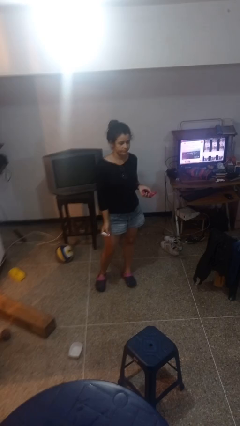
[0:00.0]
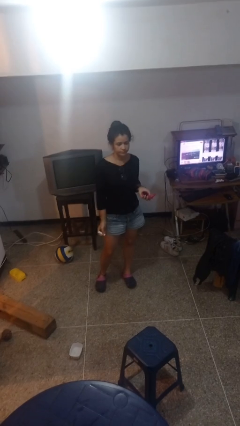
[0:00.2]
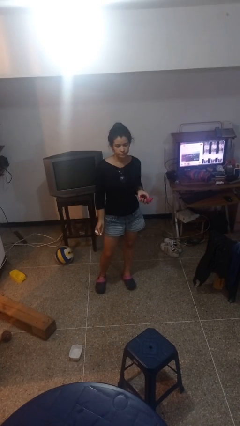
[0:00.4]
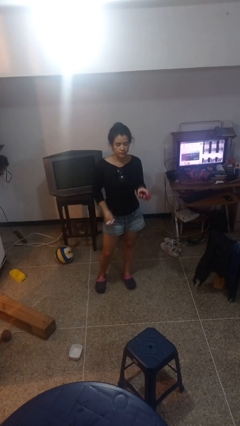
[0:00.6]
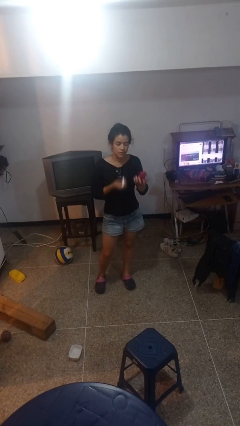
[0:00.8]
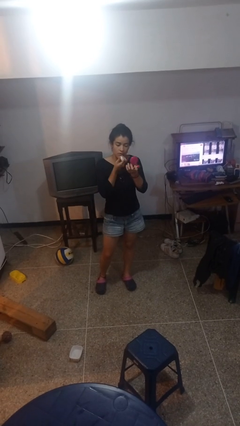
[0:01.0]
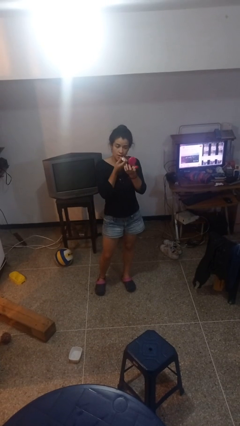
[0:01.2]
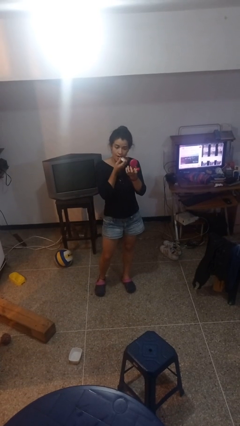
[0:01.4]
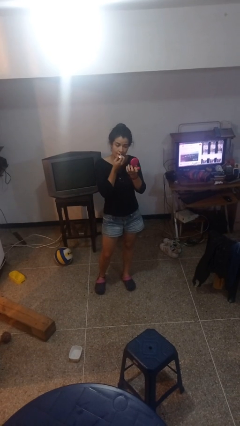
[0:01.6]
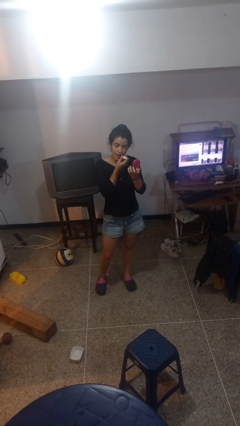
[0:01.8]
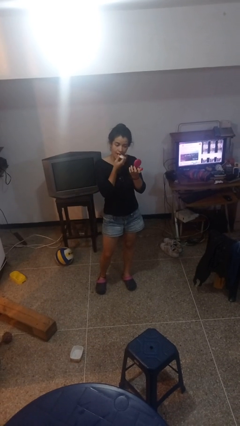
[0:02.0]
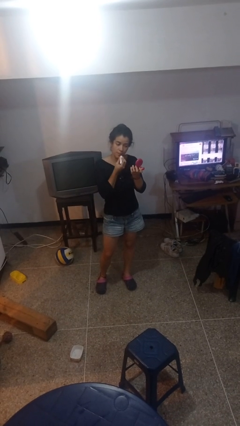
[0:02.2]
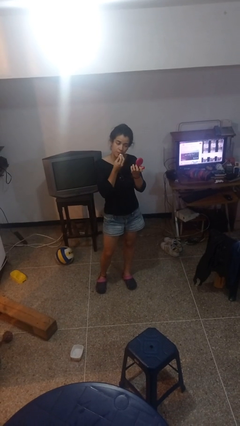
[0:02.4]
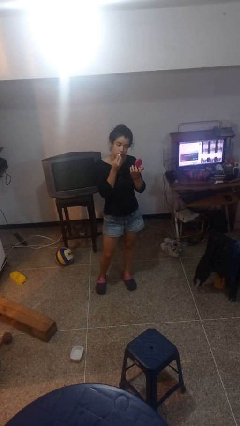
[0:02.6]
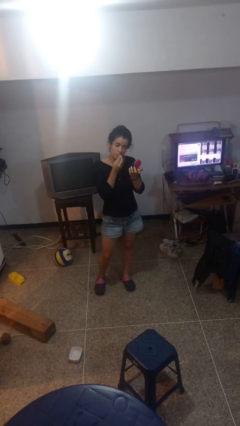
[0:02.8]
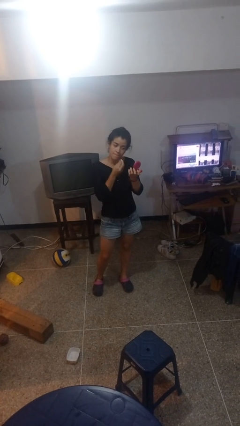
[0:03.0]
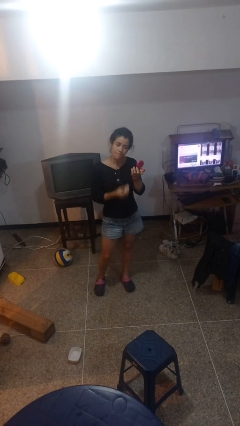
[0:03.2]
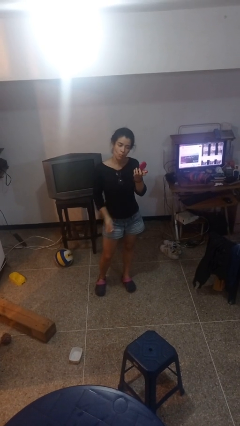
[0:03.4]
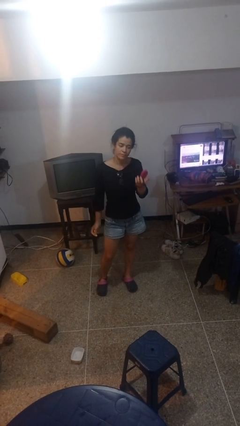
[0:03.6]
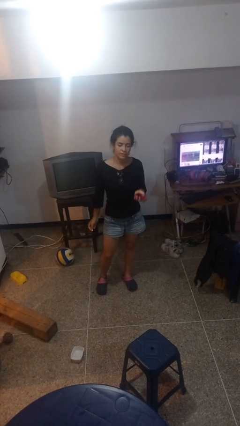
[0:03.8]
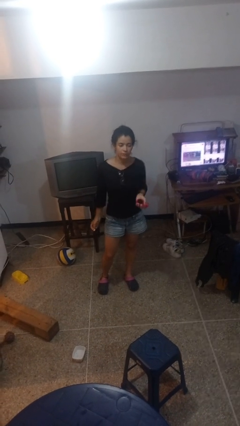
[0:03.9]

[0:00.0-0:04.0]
person applies lip makeup

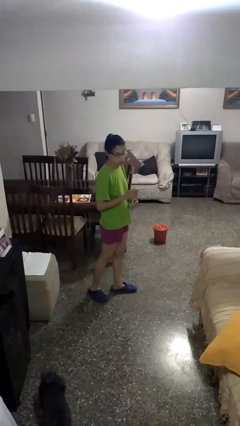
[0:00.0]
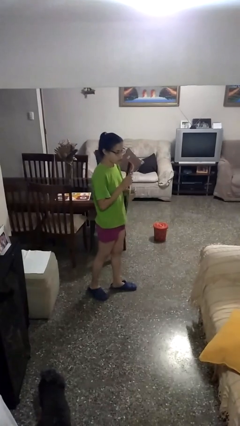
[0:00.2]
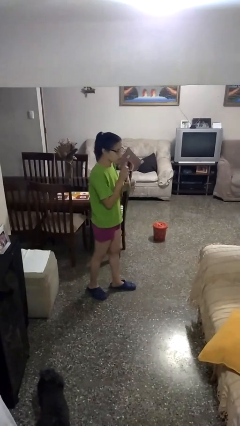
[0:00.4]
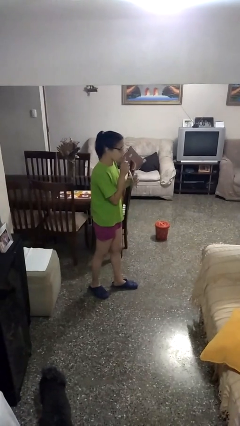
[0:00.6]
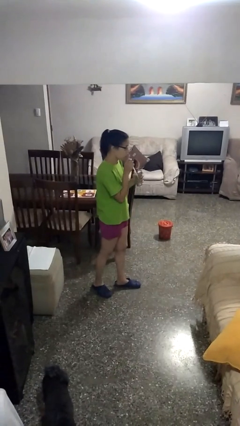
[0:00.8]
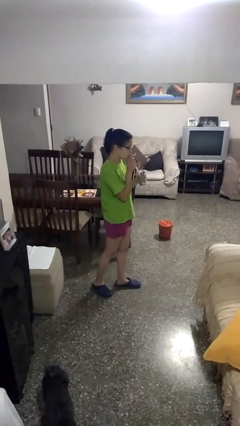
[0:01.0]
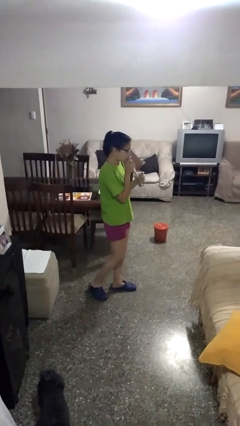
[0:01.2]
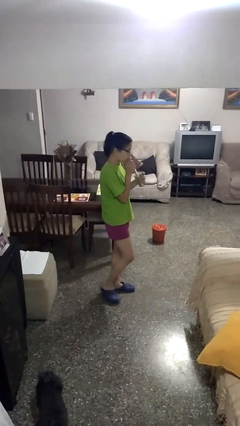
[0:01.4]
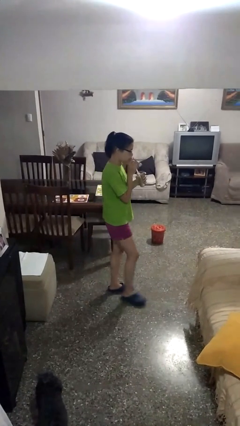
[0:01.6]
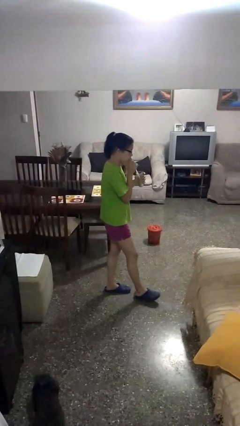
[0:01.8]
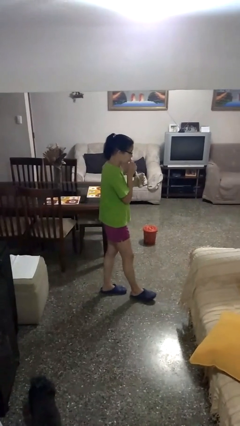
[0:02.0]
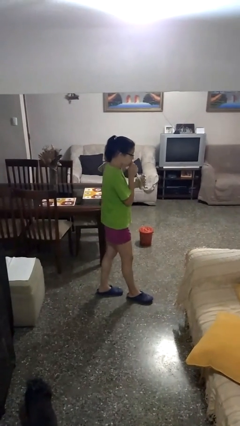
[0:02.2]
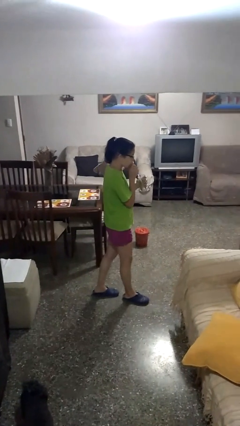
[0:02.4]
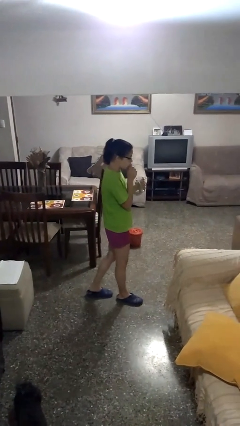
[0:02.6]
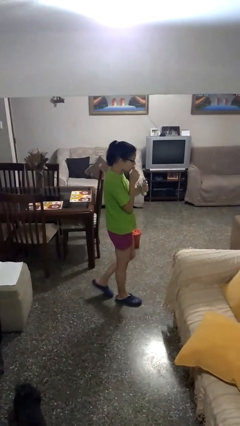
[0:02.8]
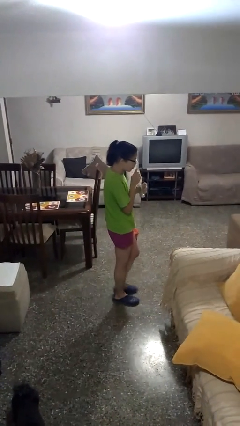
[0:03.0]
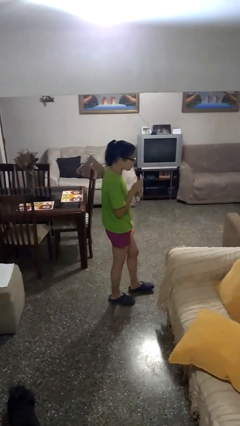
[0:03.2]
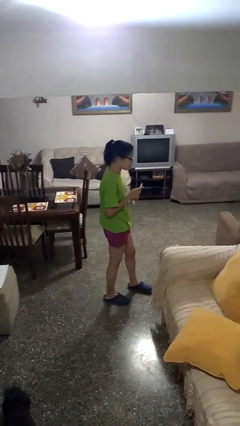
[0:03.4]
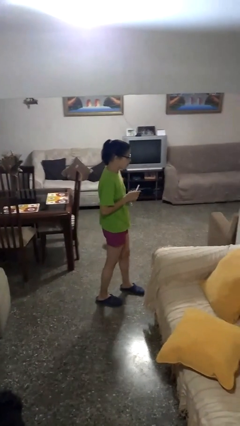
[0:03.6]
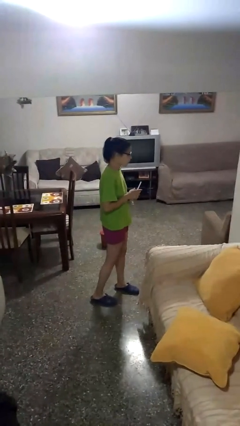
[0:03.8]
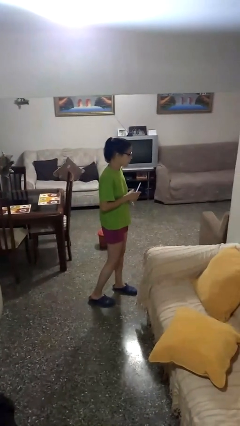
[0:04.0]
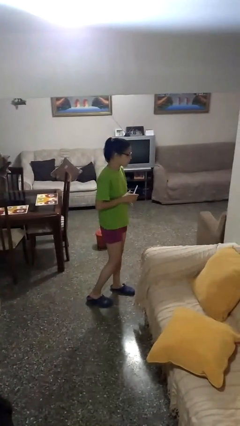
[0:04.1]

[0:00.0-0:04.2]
person drinks from straw

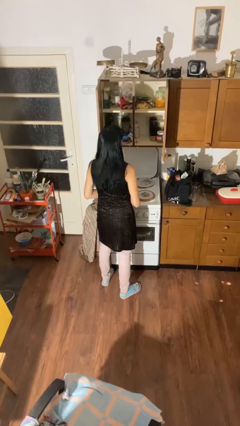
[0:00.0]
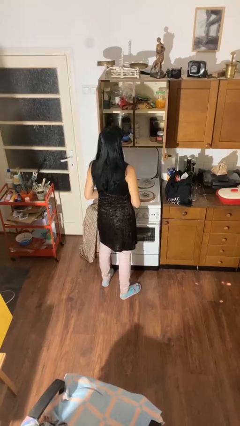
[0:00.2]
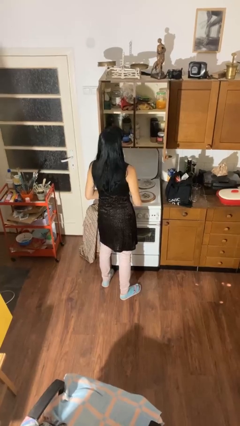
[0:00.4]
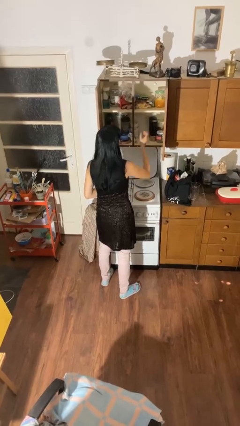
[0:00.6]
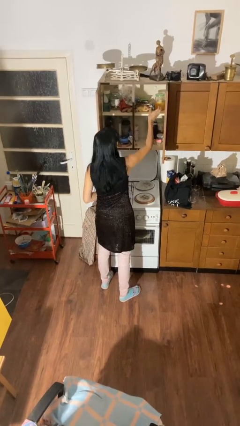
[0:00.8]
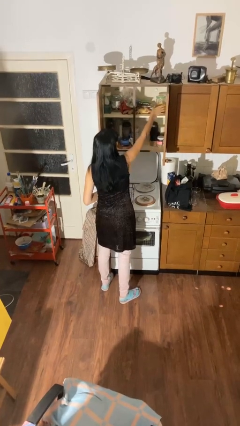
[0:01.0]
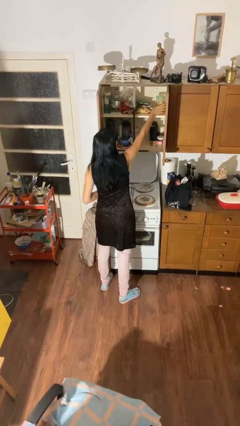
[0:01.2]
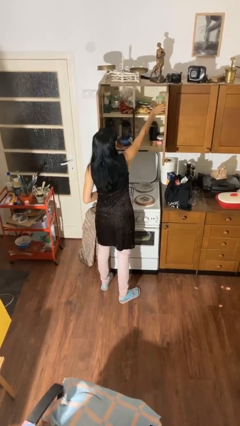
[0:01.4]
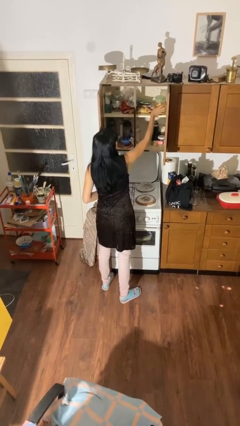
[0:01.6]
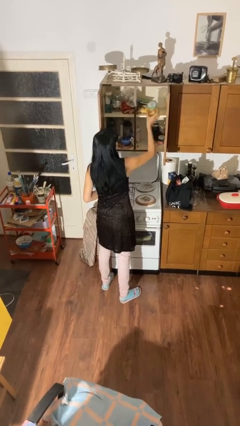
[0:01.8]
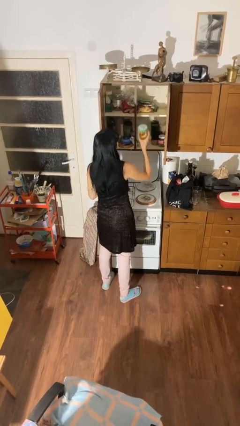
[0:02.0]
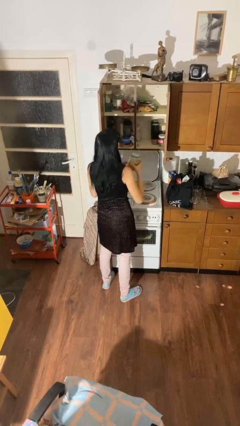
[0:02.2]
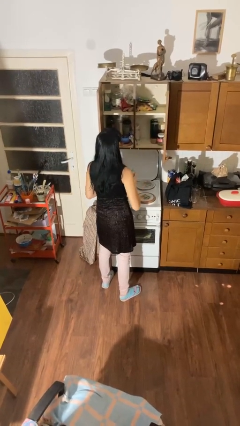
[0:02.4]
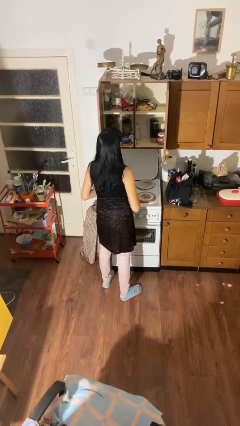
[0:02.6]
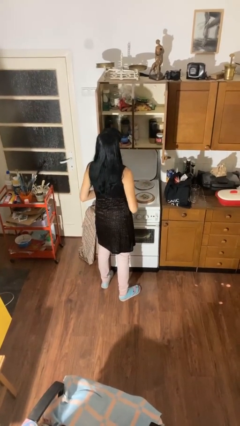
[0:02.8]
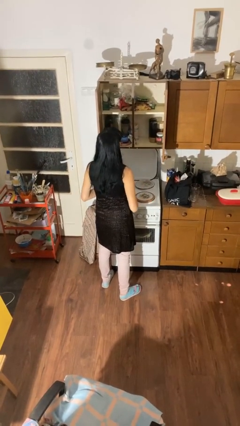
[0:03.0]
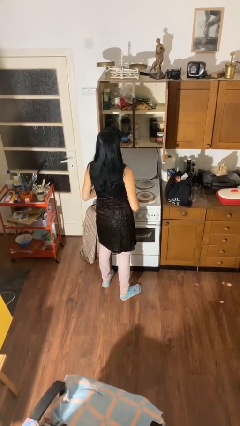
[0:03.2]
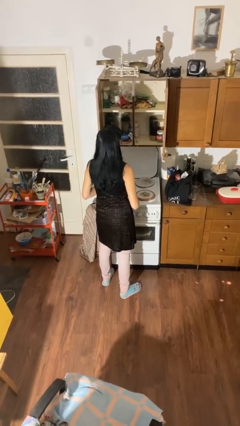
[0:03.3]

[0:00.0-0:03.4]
person picks up object from cabinet

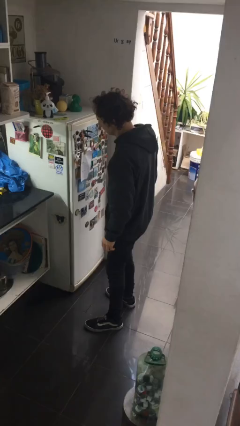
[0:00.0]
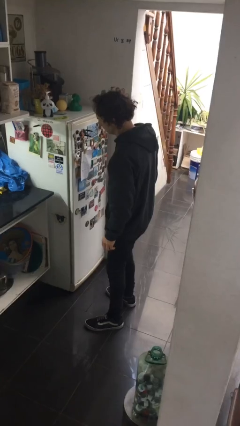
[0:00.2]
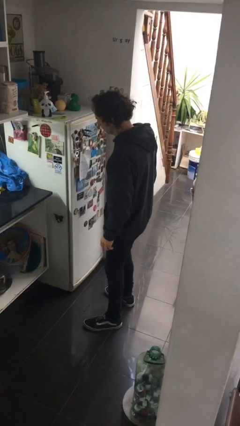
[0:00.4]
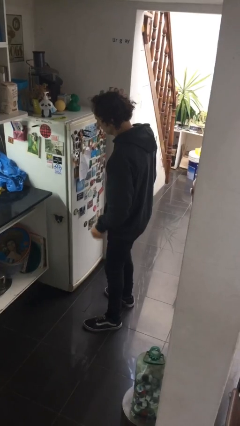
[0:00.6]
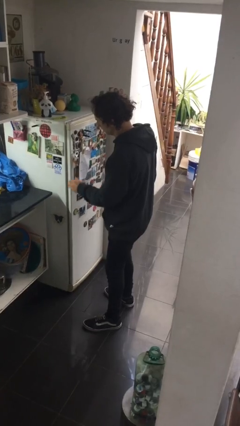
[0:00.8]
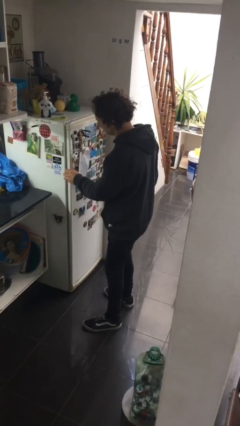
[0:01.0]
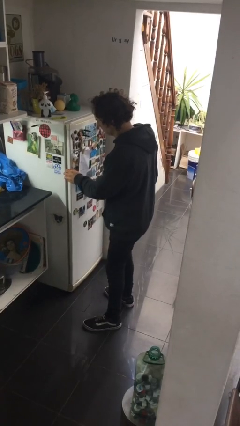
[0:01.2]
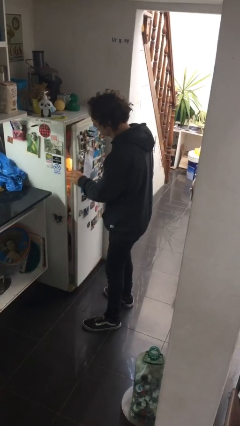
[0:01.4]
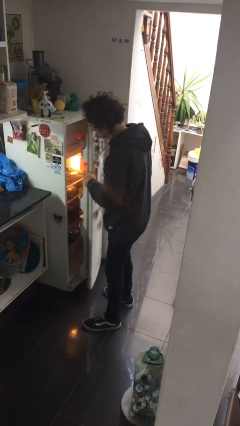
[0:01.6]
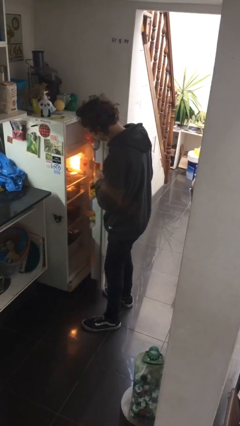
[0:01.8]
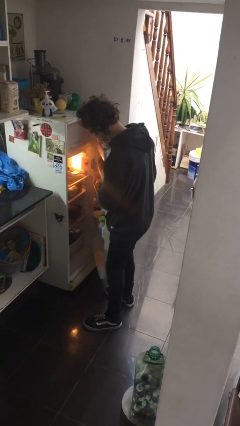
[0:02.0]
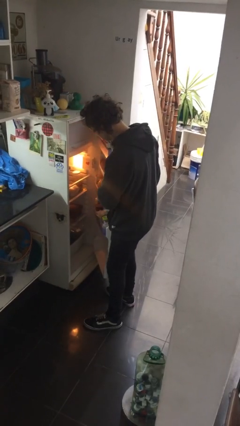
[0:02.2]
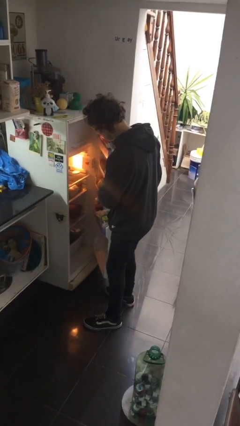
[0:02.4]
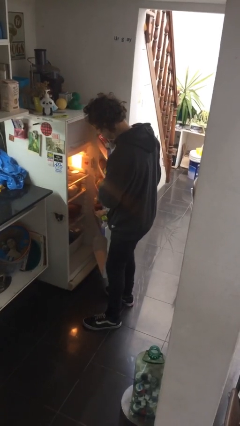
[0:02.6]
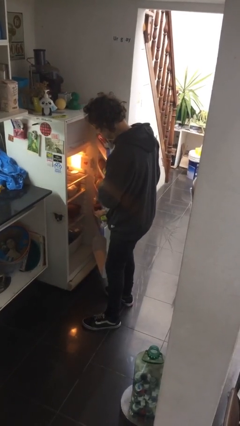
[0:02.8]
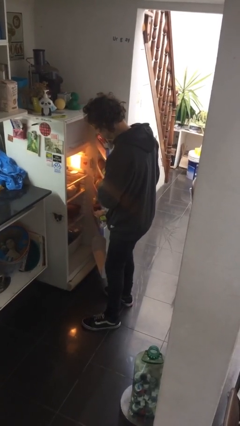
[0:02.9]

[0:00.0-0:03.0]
person opens refrigerator

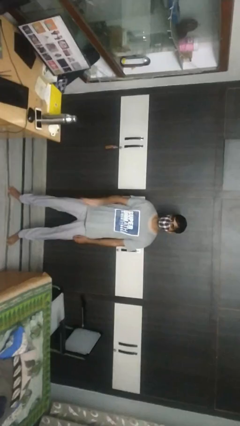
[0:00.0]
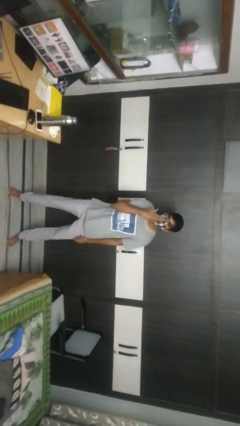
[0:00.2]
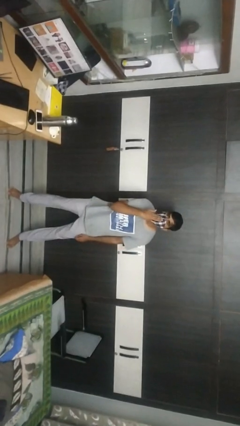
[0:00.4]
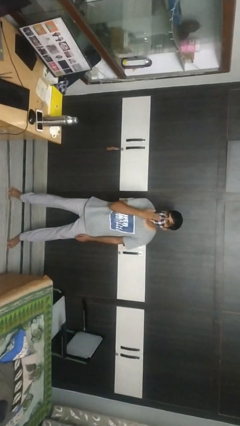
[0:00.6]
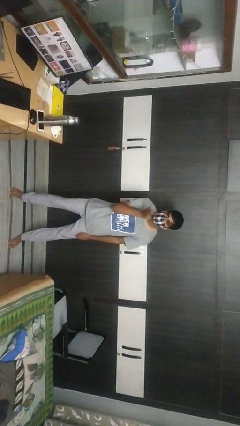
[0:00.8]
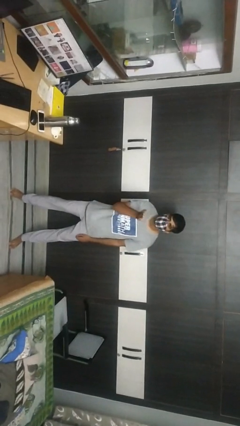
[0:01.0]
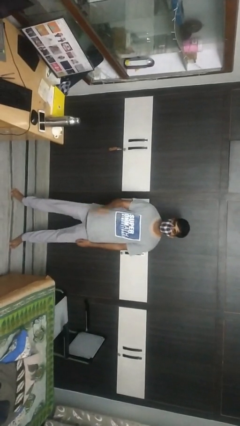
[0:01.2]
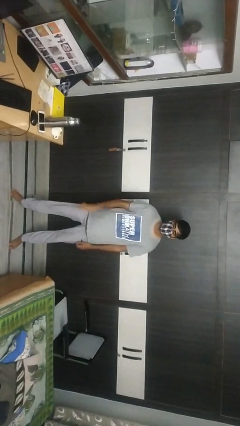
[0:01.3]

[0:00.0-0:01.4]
person gestures blow kiss

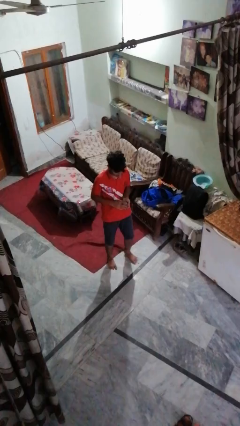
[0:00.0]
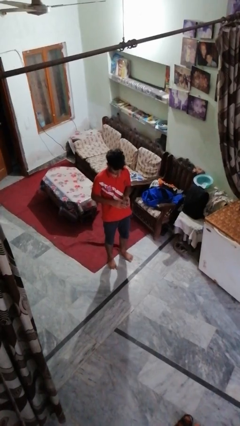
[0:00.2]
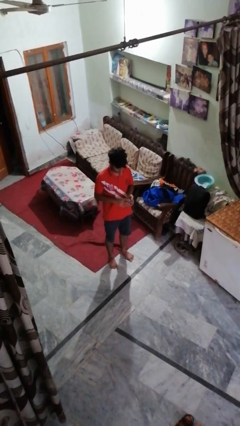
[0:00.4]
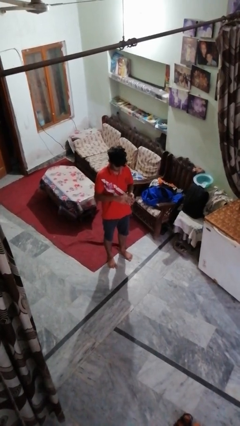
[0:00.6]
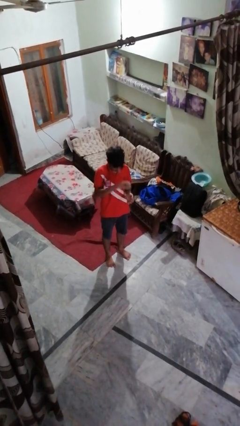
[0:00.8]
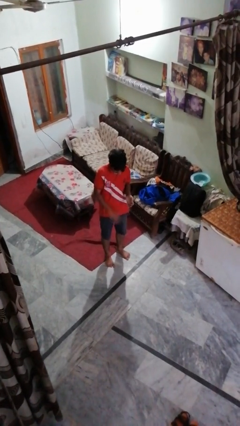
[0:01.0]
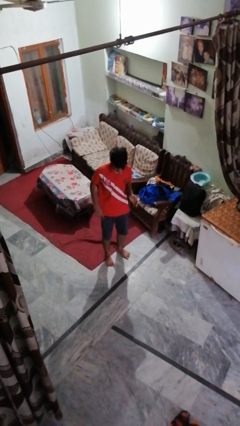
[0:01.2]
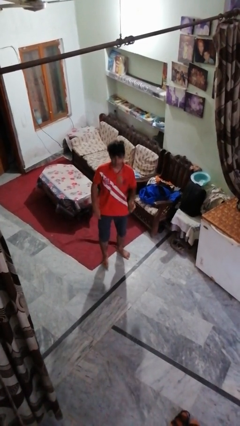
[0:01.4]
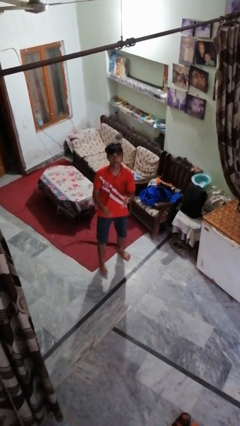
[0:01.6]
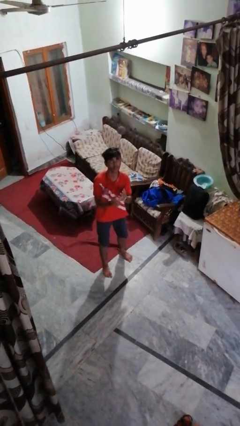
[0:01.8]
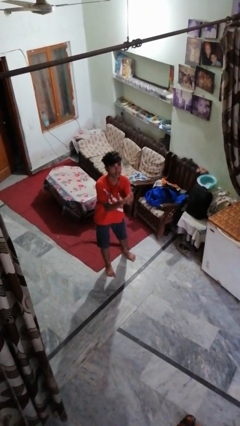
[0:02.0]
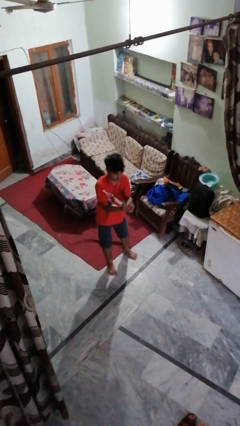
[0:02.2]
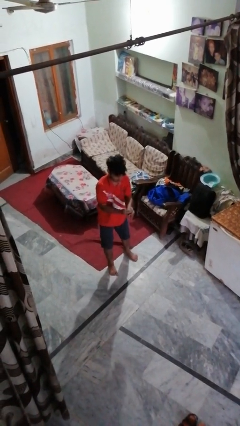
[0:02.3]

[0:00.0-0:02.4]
person bounces ball on floor
